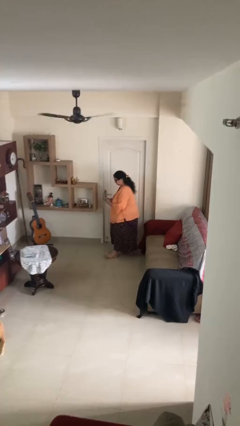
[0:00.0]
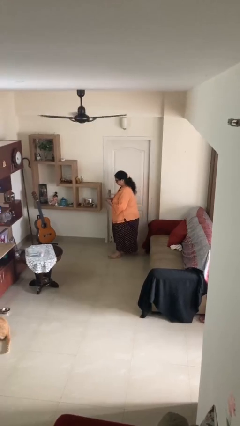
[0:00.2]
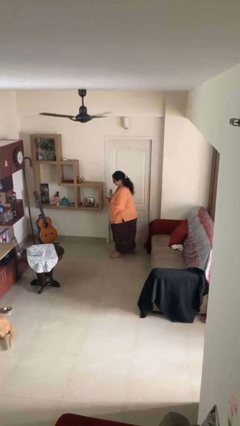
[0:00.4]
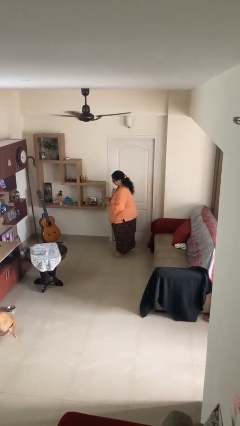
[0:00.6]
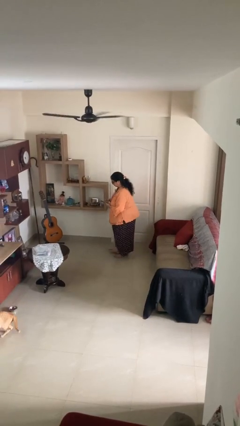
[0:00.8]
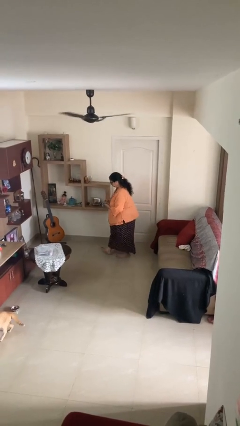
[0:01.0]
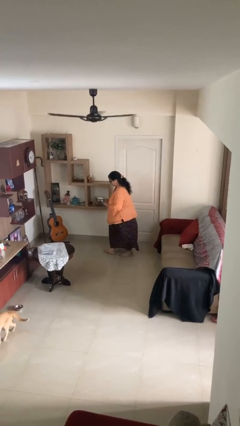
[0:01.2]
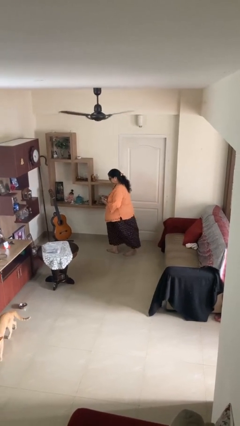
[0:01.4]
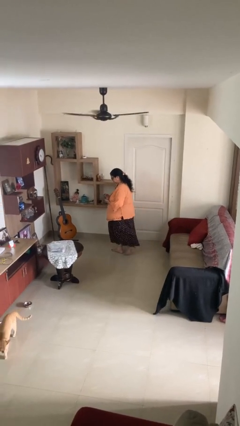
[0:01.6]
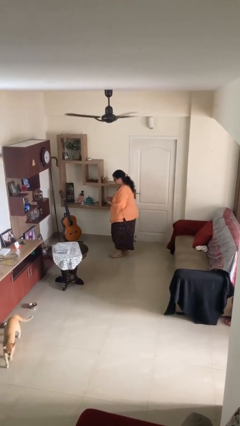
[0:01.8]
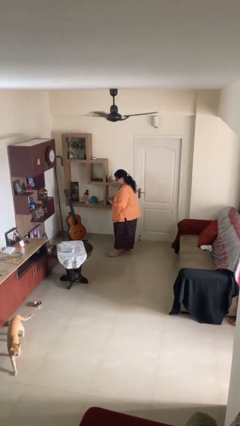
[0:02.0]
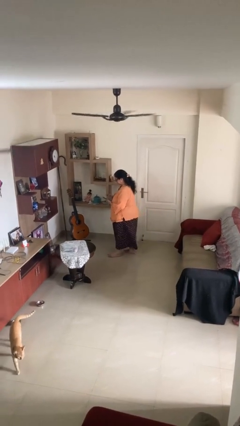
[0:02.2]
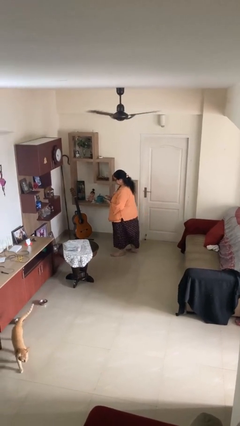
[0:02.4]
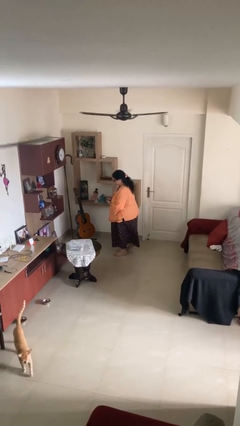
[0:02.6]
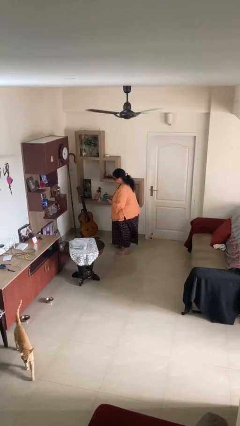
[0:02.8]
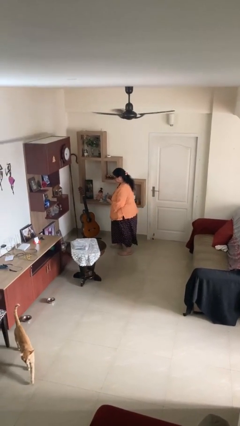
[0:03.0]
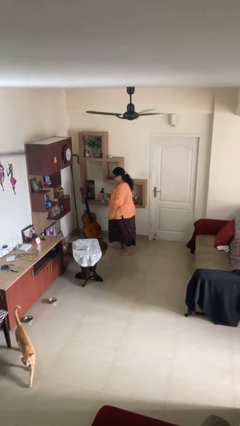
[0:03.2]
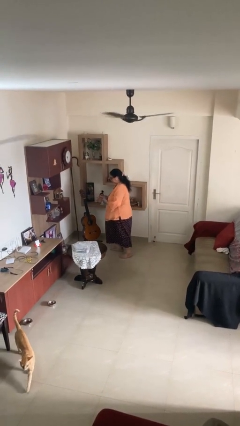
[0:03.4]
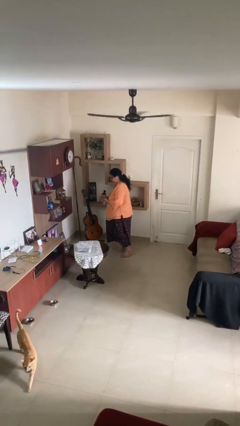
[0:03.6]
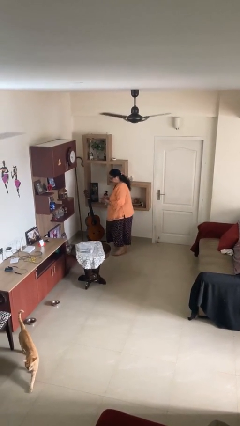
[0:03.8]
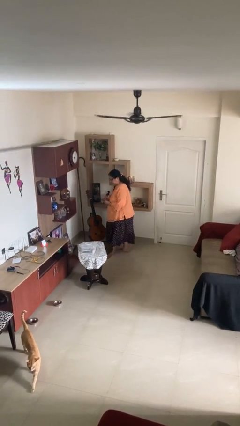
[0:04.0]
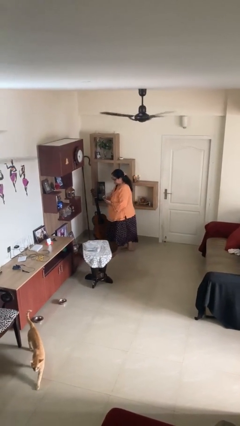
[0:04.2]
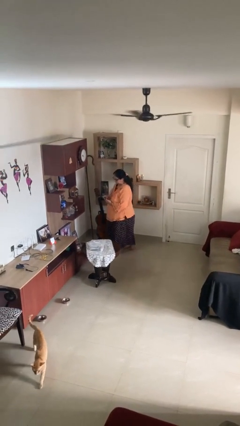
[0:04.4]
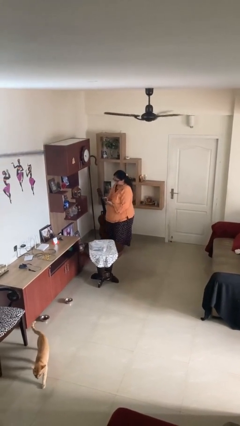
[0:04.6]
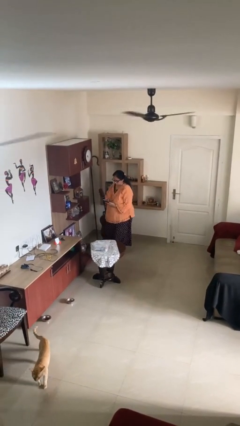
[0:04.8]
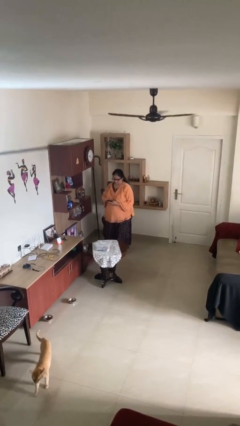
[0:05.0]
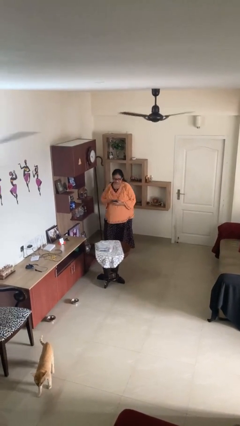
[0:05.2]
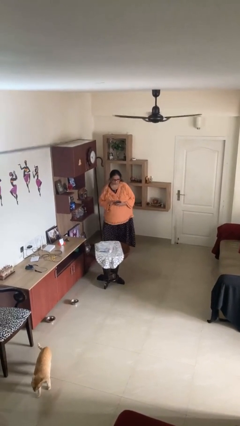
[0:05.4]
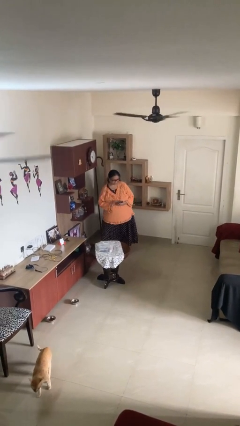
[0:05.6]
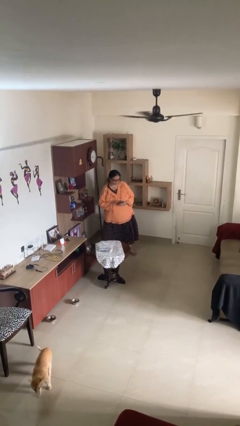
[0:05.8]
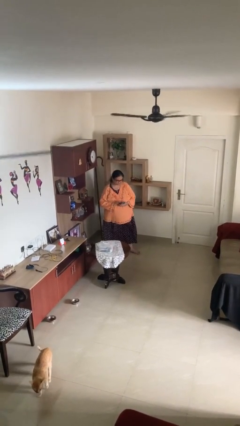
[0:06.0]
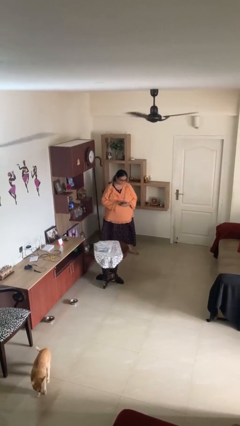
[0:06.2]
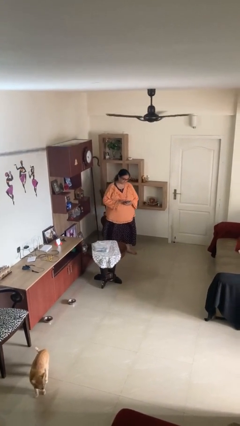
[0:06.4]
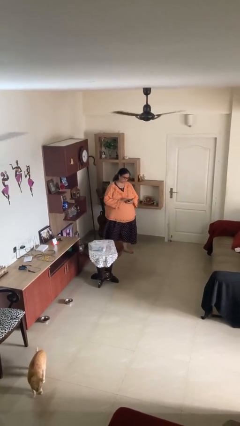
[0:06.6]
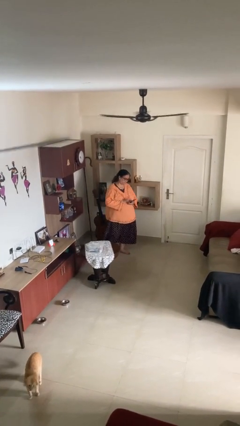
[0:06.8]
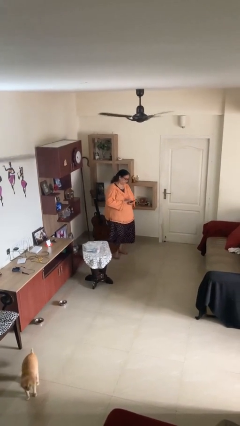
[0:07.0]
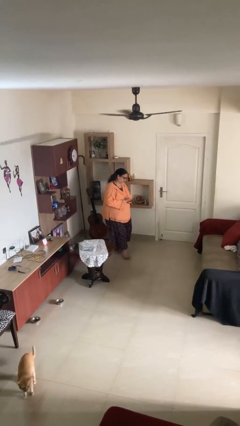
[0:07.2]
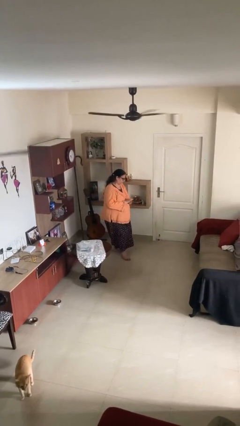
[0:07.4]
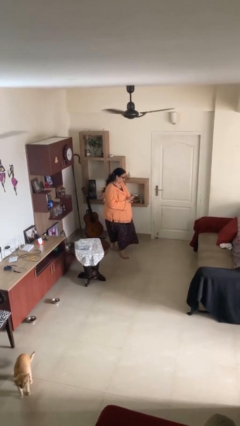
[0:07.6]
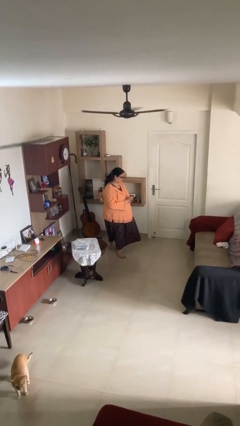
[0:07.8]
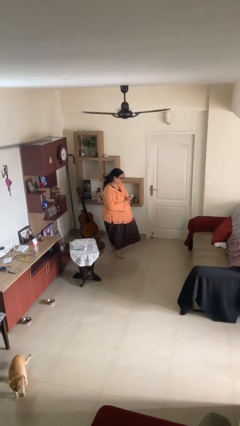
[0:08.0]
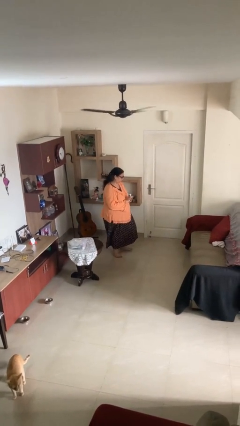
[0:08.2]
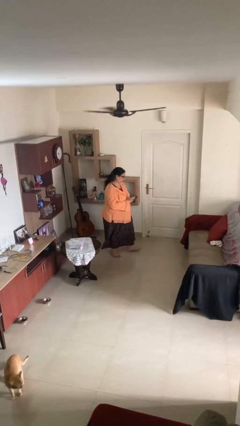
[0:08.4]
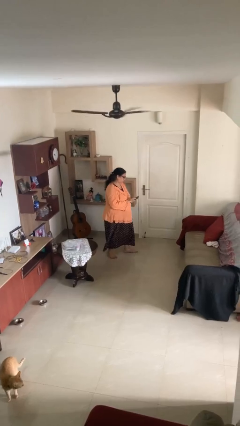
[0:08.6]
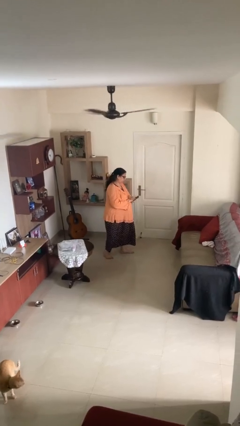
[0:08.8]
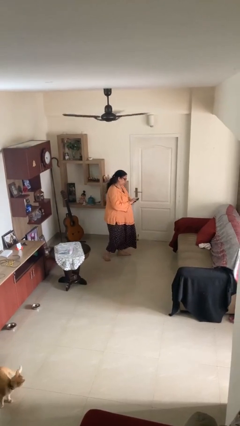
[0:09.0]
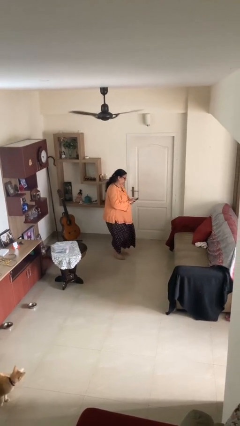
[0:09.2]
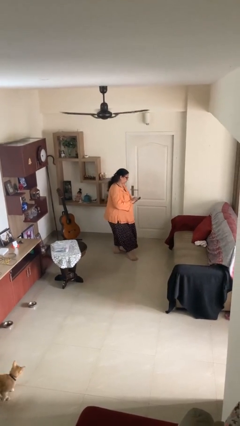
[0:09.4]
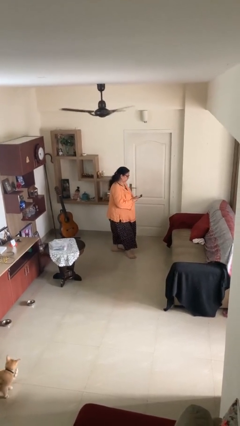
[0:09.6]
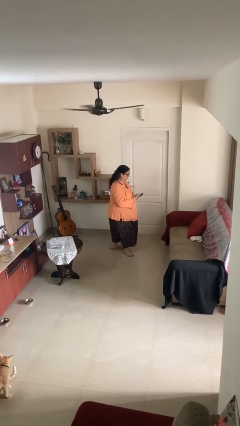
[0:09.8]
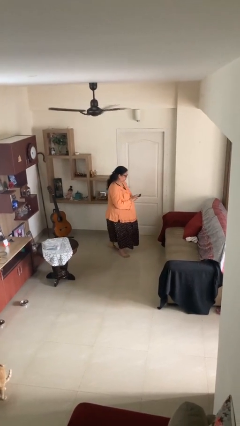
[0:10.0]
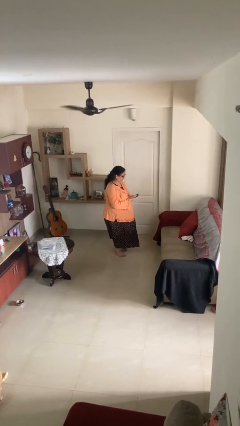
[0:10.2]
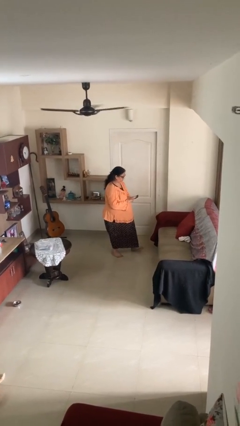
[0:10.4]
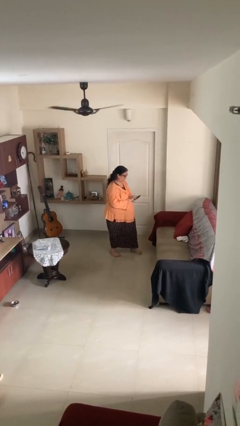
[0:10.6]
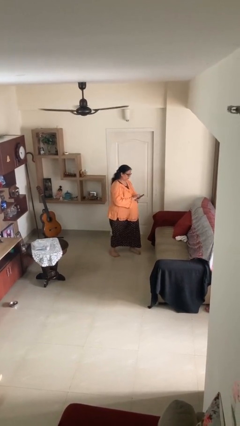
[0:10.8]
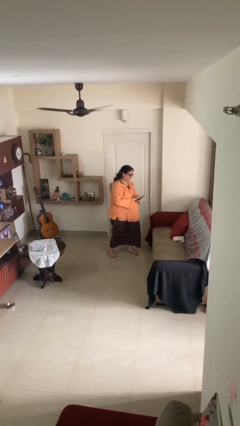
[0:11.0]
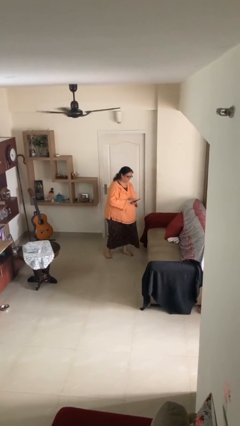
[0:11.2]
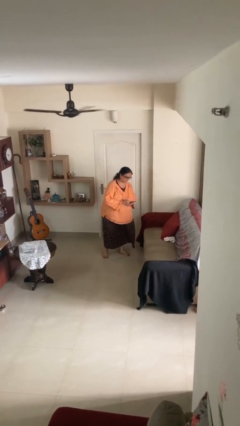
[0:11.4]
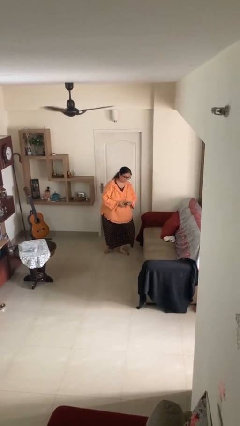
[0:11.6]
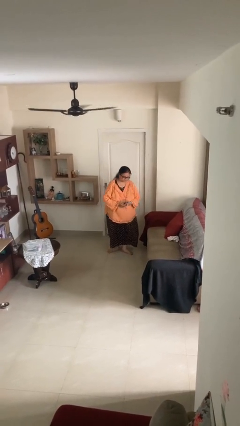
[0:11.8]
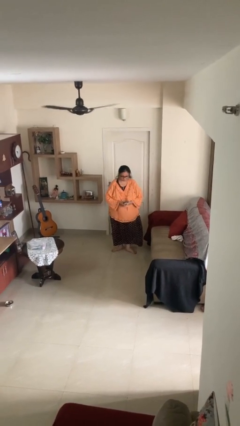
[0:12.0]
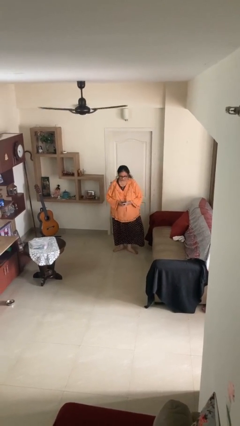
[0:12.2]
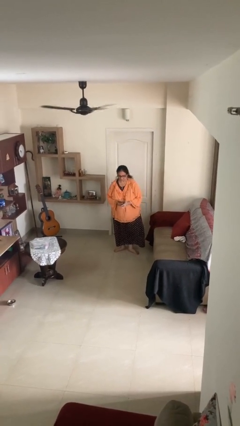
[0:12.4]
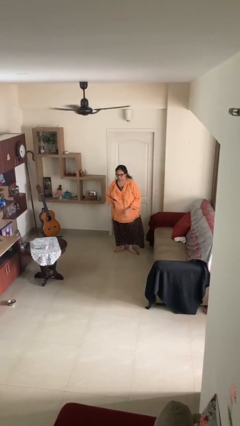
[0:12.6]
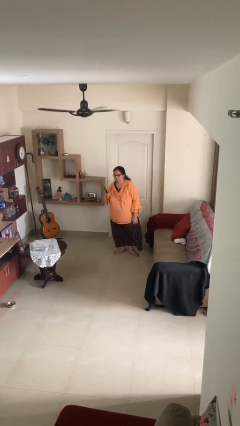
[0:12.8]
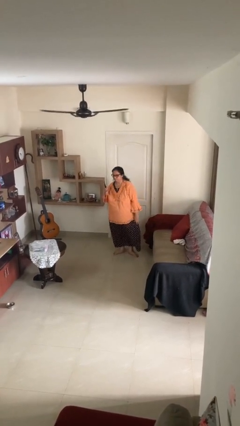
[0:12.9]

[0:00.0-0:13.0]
person texts on phone

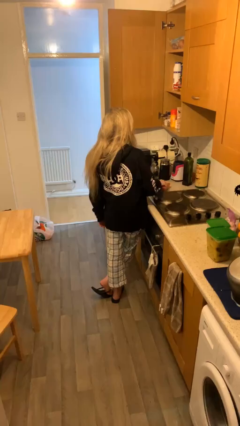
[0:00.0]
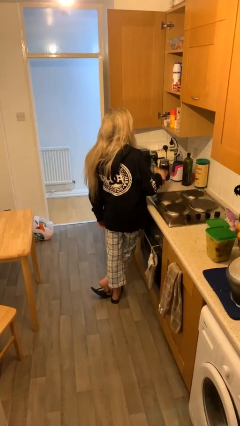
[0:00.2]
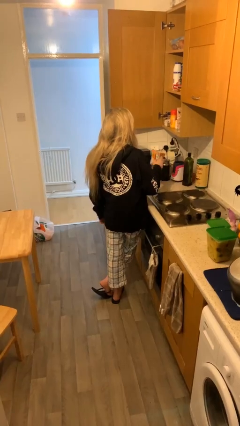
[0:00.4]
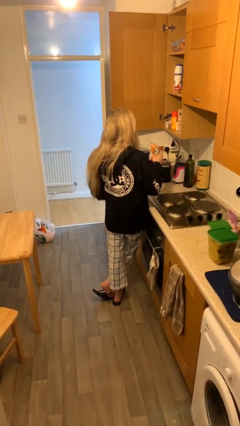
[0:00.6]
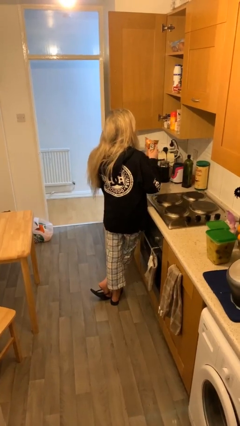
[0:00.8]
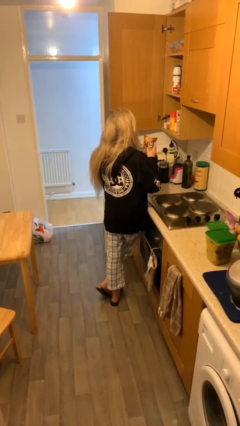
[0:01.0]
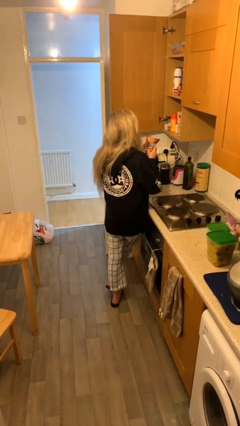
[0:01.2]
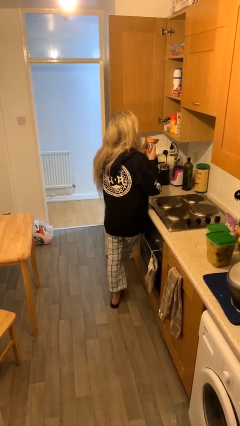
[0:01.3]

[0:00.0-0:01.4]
person picks up object from table

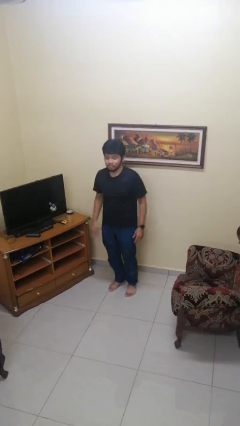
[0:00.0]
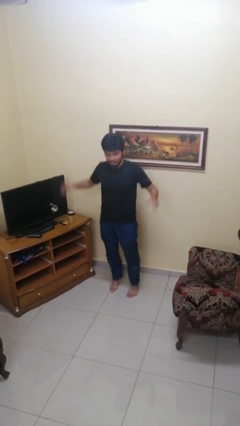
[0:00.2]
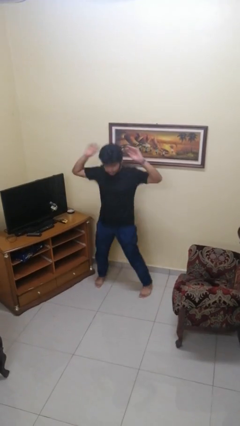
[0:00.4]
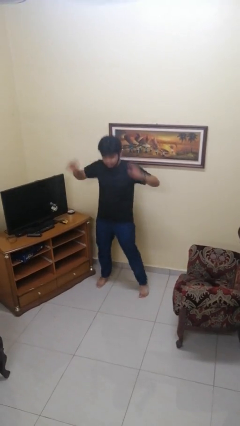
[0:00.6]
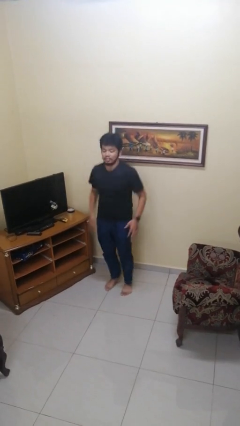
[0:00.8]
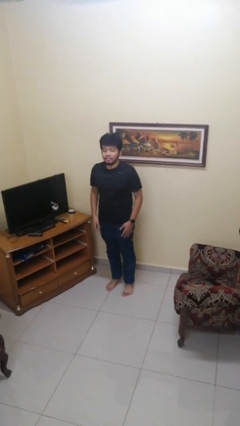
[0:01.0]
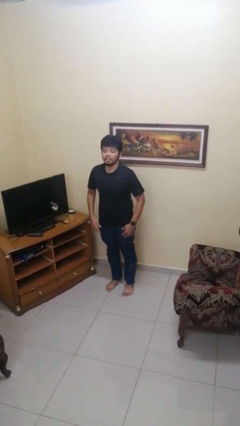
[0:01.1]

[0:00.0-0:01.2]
person exercises with jumping jacks

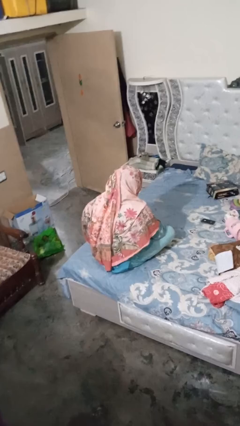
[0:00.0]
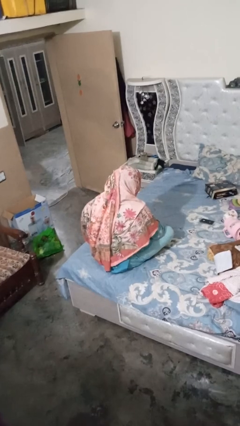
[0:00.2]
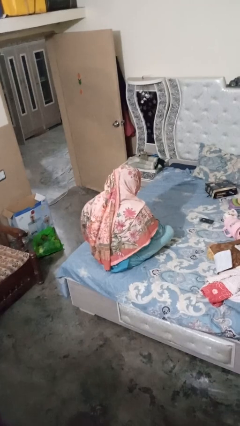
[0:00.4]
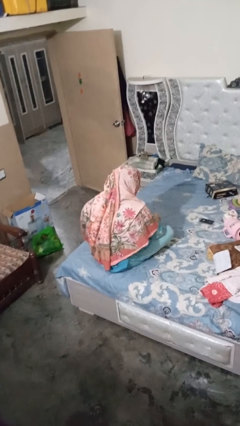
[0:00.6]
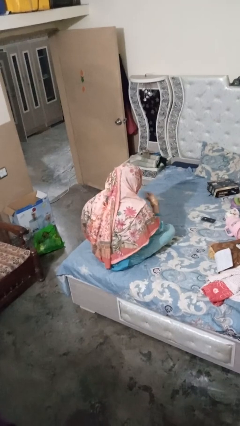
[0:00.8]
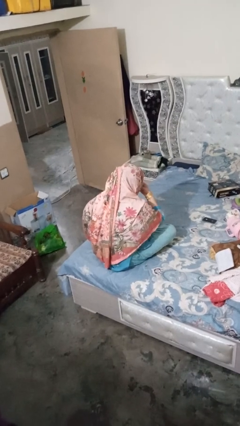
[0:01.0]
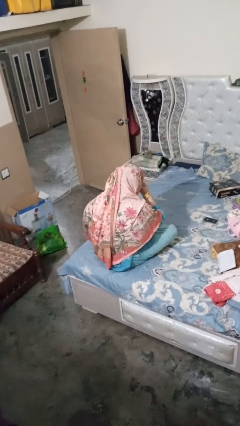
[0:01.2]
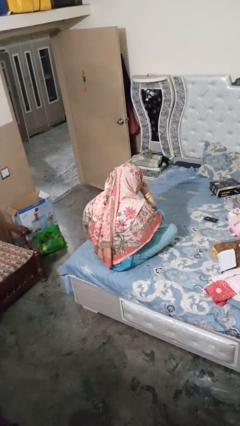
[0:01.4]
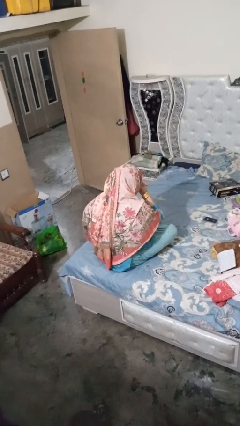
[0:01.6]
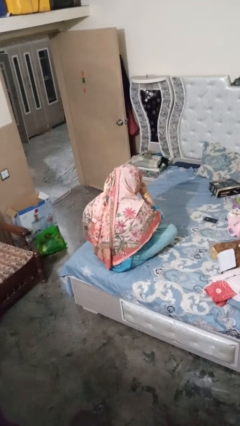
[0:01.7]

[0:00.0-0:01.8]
person blows nose

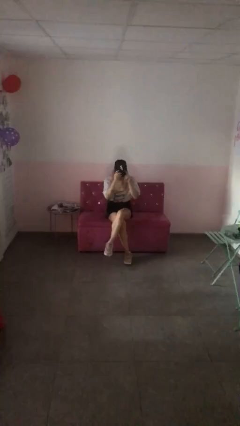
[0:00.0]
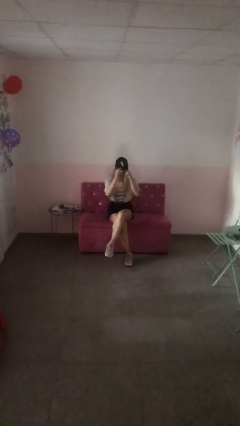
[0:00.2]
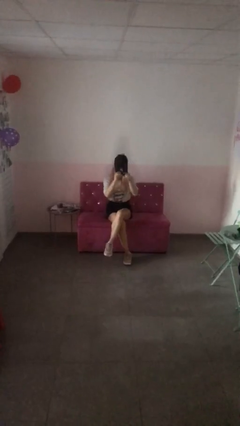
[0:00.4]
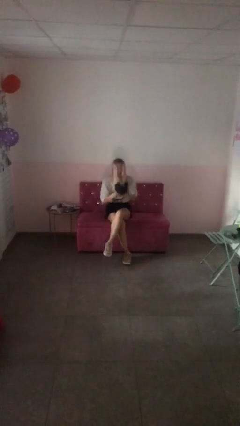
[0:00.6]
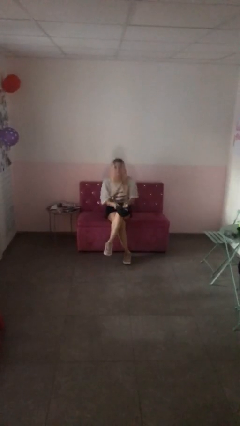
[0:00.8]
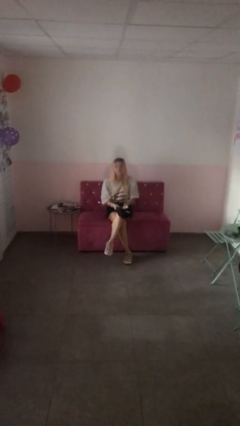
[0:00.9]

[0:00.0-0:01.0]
person takes off hat
